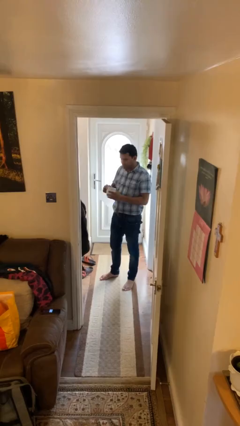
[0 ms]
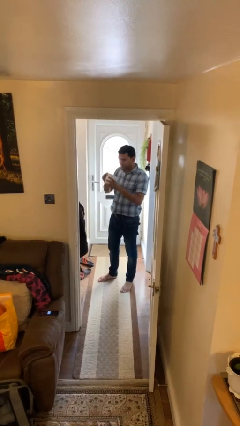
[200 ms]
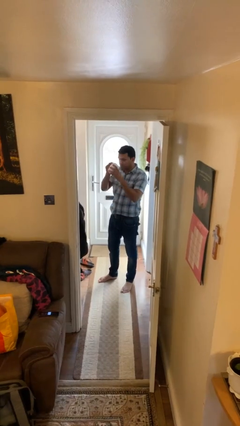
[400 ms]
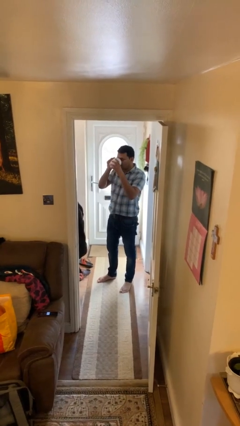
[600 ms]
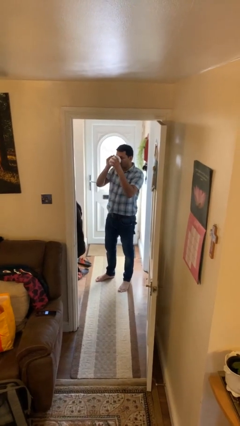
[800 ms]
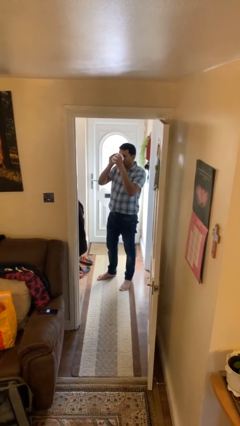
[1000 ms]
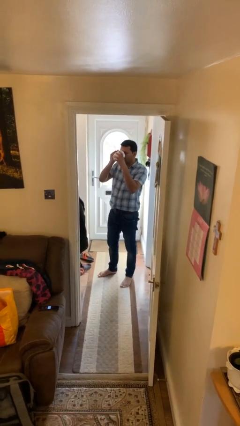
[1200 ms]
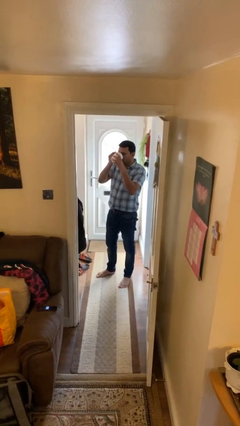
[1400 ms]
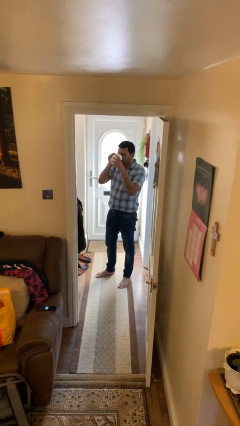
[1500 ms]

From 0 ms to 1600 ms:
person drinks from mug

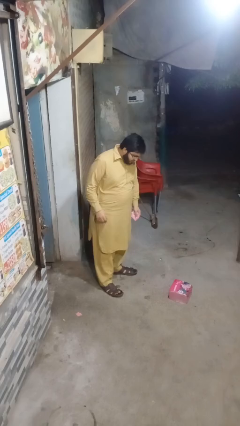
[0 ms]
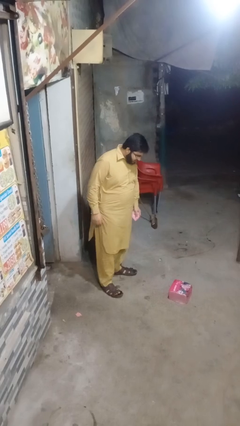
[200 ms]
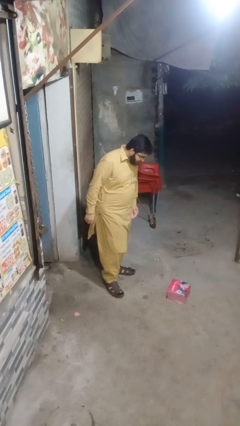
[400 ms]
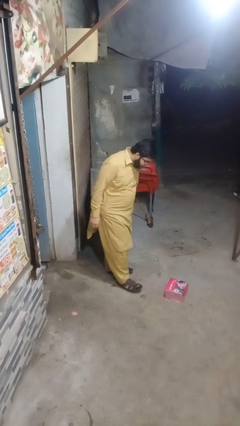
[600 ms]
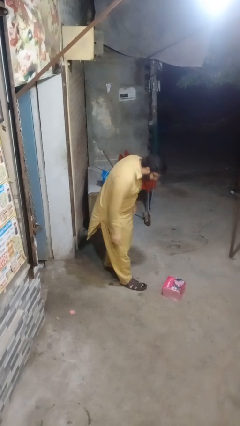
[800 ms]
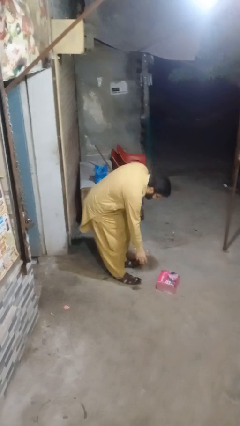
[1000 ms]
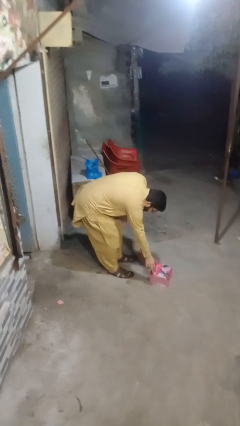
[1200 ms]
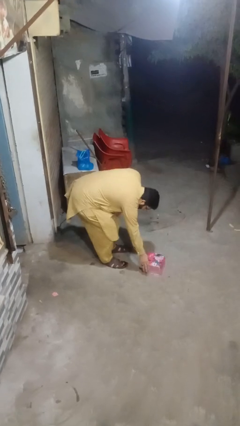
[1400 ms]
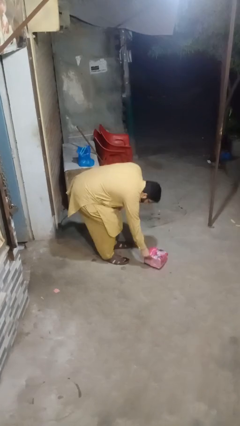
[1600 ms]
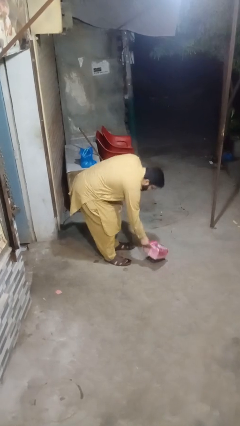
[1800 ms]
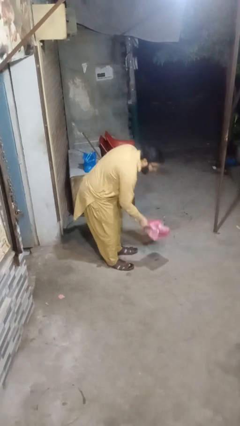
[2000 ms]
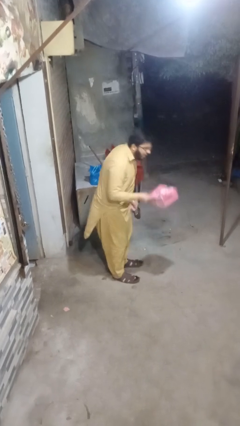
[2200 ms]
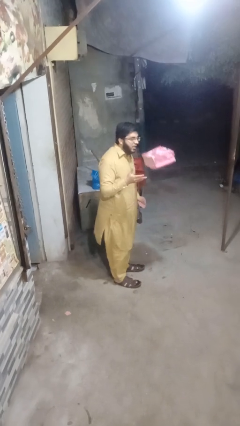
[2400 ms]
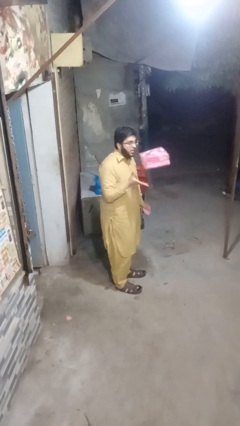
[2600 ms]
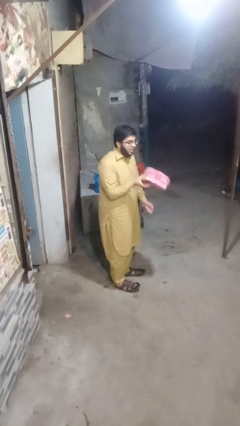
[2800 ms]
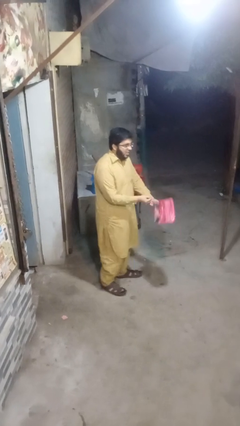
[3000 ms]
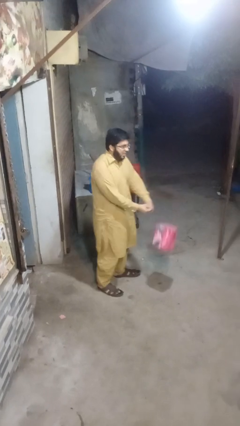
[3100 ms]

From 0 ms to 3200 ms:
person picks up object from floor

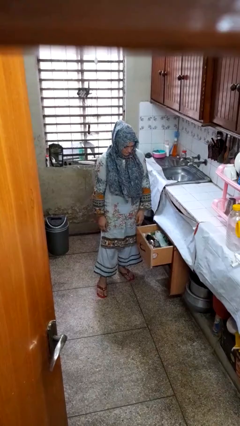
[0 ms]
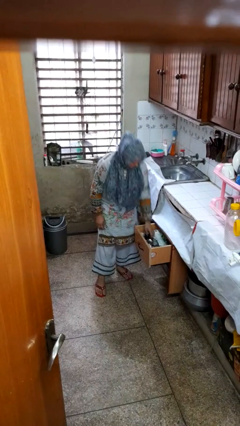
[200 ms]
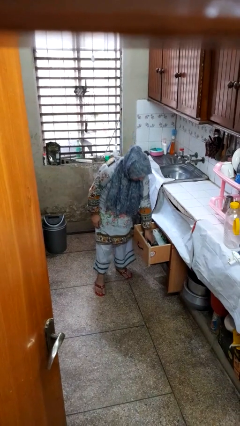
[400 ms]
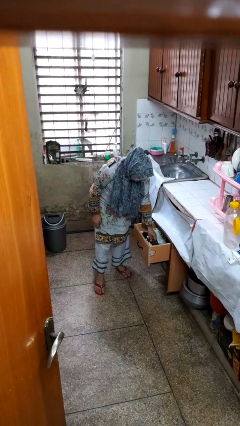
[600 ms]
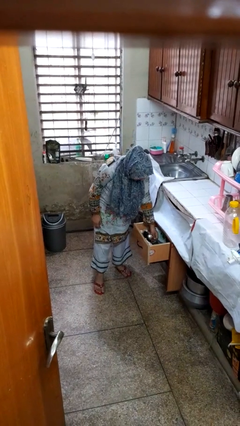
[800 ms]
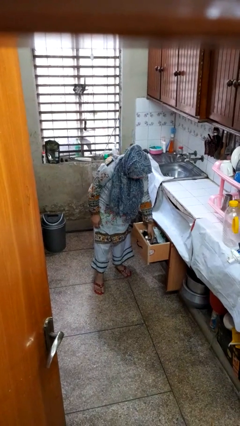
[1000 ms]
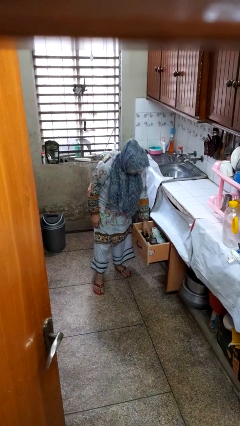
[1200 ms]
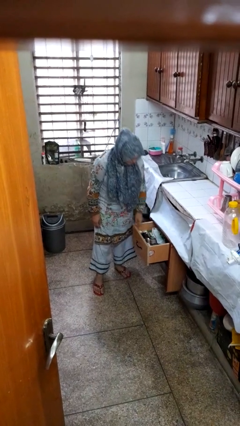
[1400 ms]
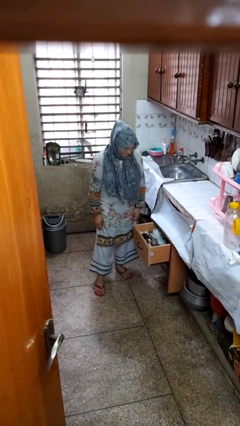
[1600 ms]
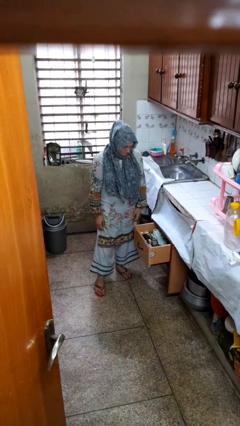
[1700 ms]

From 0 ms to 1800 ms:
person searches in kitchen drawer

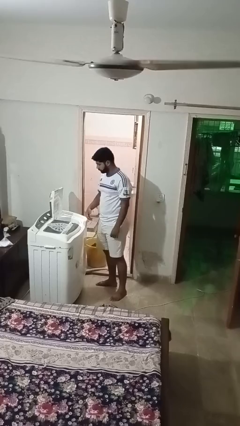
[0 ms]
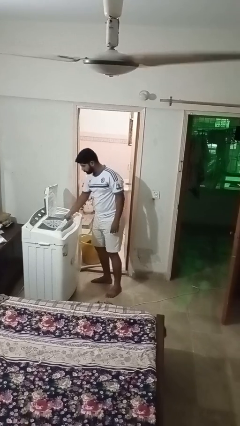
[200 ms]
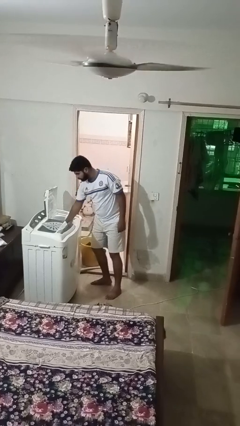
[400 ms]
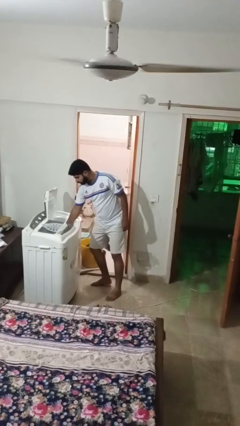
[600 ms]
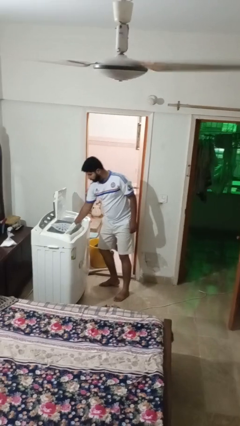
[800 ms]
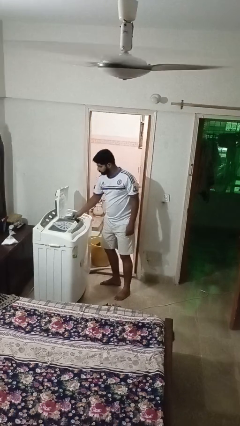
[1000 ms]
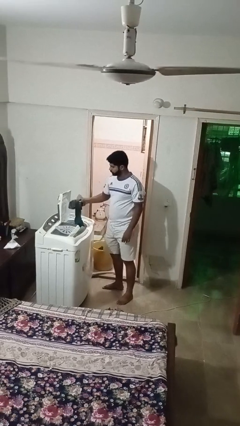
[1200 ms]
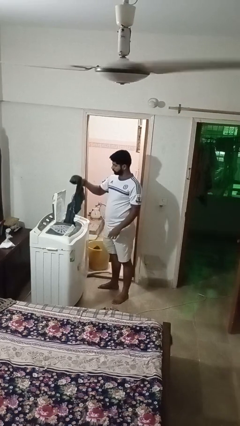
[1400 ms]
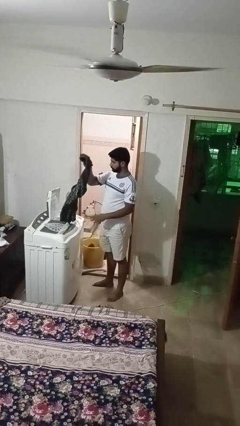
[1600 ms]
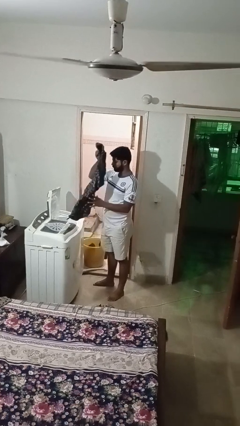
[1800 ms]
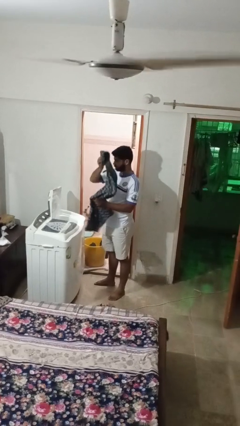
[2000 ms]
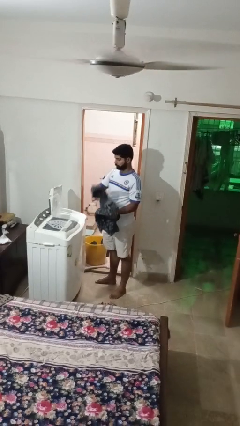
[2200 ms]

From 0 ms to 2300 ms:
person unloads dryer

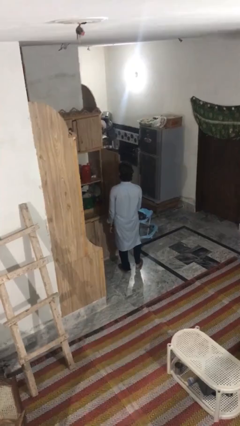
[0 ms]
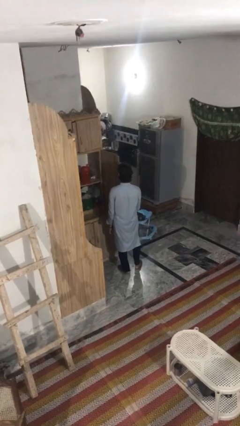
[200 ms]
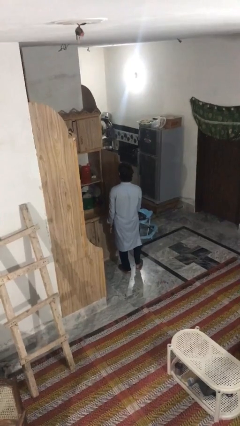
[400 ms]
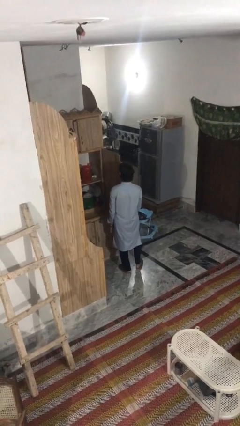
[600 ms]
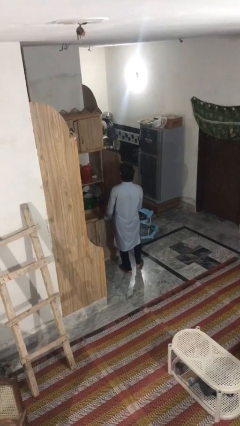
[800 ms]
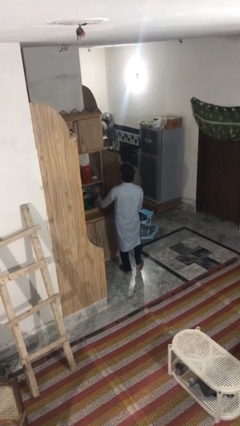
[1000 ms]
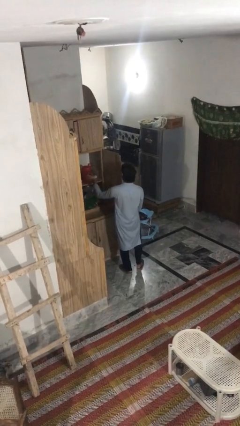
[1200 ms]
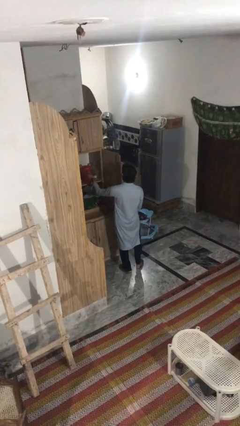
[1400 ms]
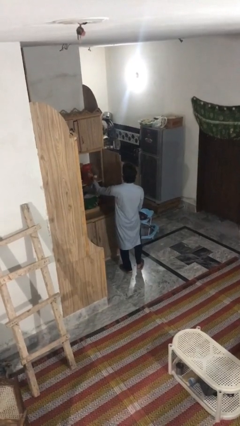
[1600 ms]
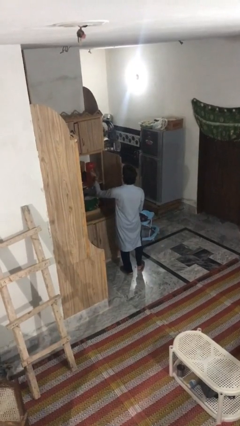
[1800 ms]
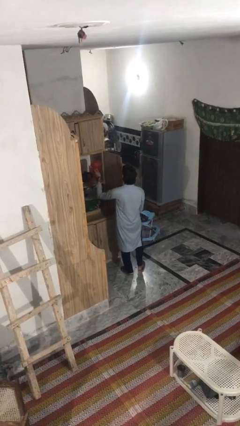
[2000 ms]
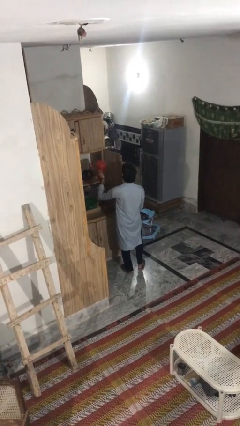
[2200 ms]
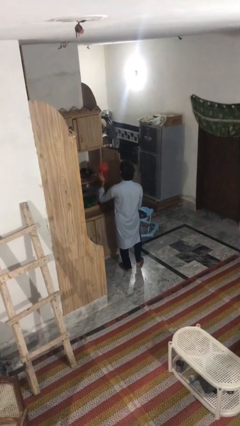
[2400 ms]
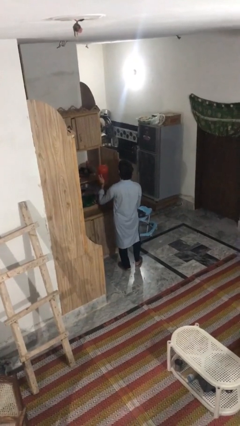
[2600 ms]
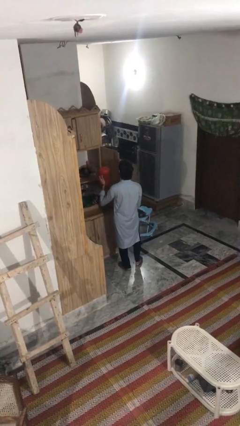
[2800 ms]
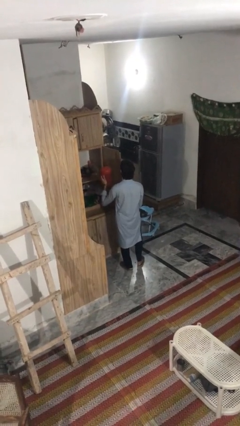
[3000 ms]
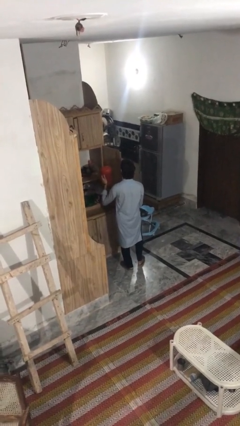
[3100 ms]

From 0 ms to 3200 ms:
person picks up object from cabinet

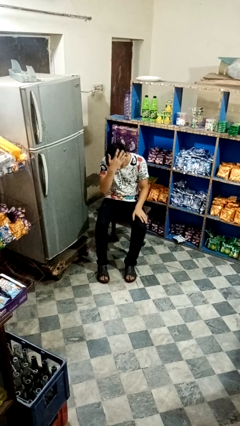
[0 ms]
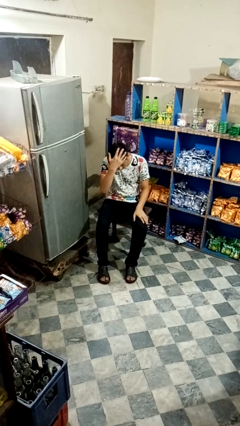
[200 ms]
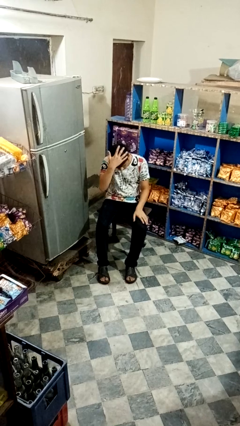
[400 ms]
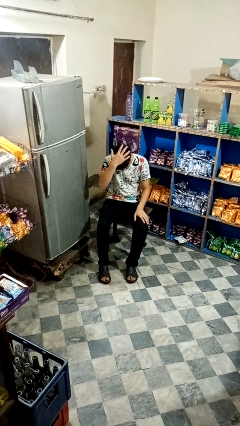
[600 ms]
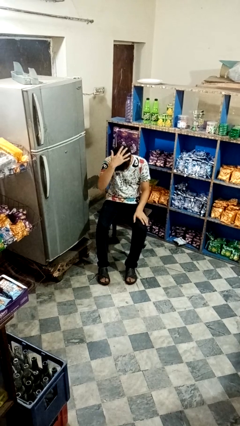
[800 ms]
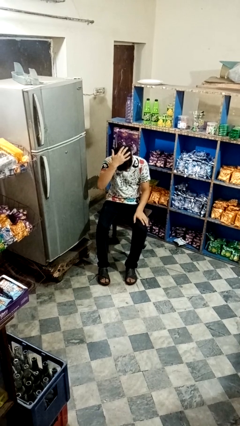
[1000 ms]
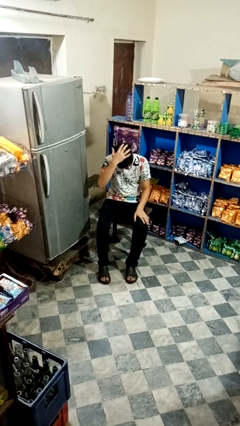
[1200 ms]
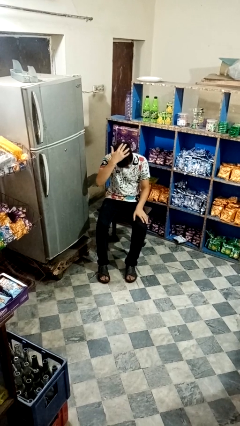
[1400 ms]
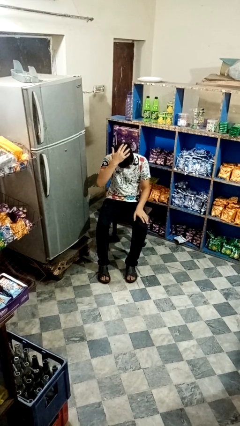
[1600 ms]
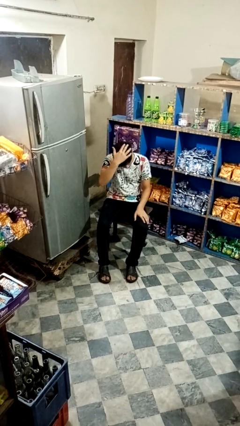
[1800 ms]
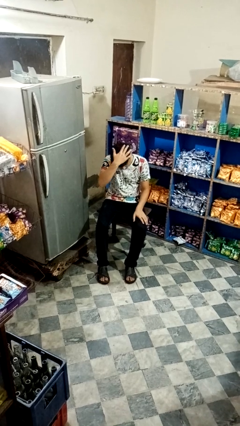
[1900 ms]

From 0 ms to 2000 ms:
person pats head

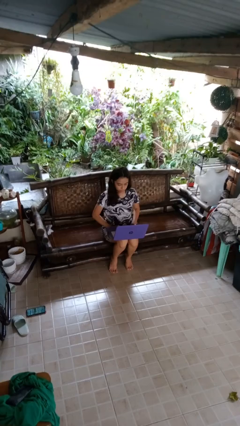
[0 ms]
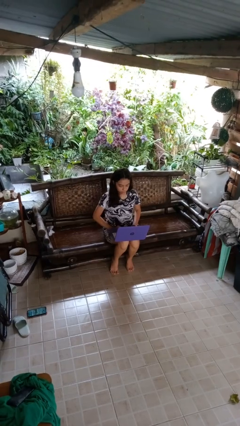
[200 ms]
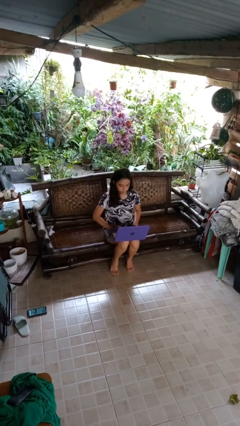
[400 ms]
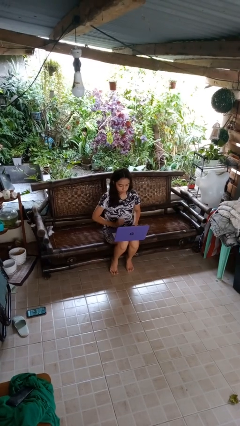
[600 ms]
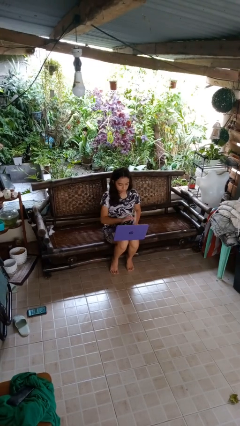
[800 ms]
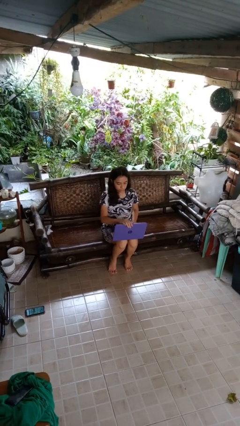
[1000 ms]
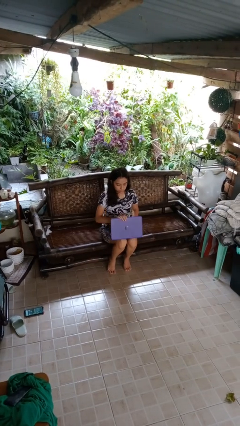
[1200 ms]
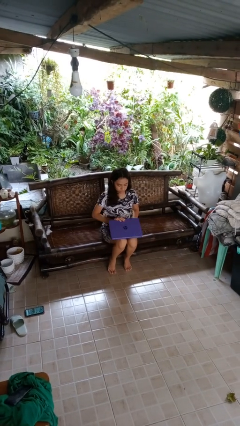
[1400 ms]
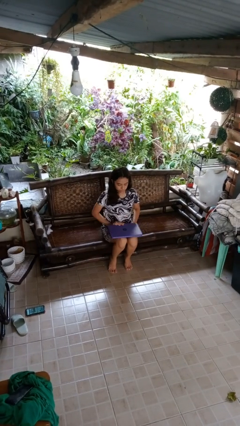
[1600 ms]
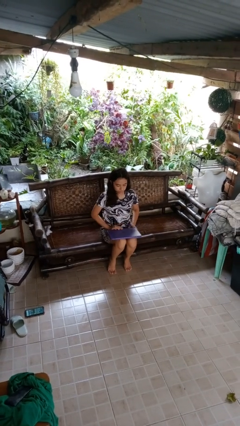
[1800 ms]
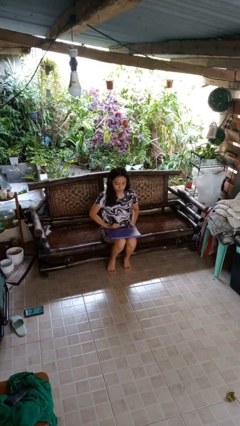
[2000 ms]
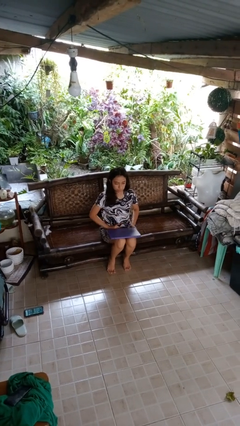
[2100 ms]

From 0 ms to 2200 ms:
person closes laptop

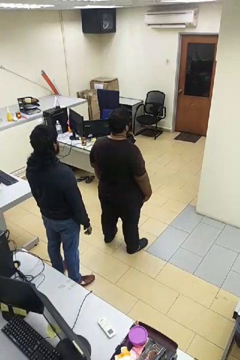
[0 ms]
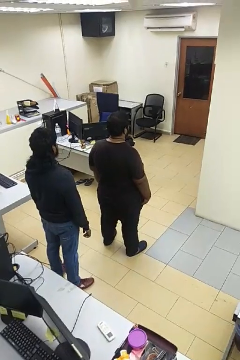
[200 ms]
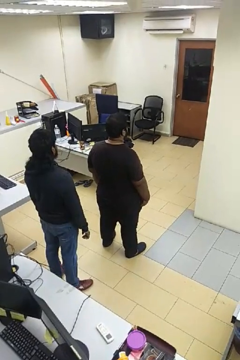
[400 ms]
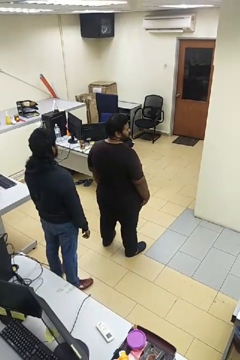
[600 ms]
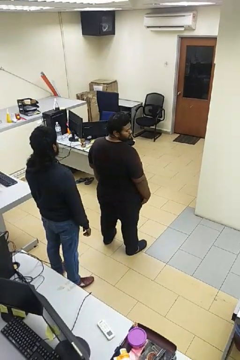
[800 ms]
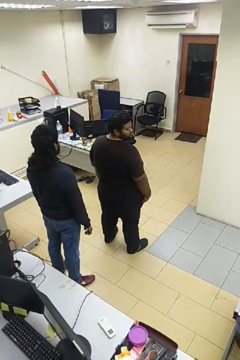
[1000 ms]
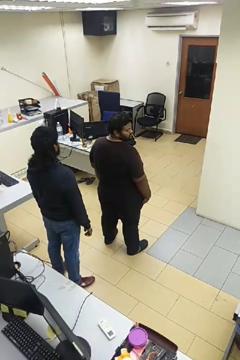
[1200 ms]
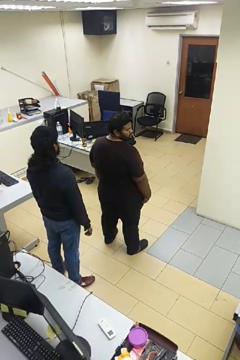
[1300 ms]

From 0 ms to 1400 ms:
person looks over shoulder
